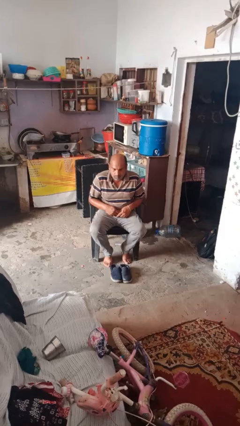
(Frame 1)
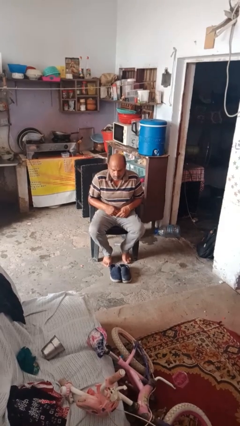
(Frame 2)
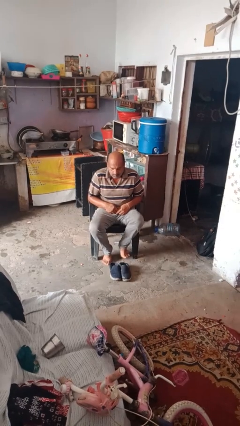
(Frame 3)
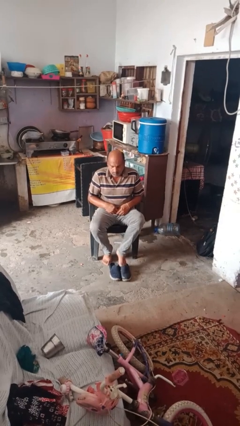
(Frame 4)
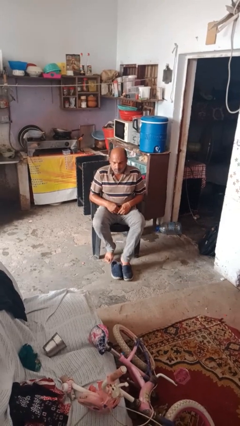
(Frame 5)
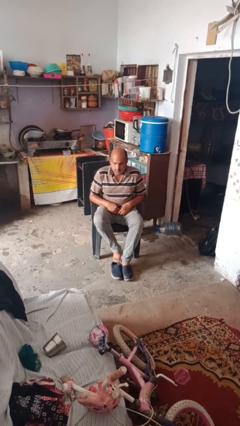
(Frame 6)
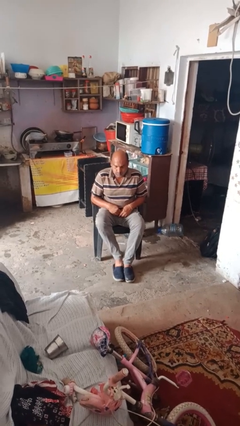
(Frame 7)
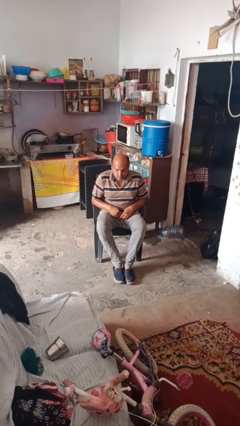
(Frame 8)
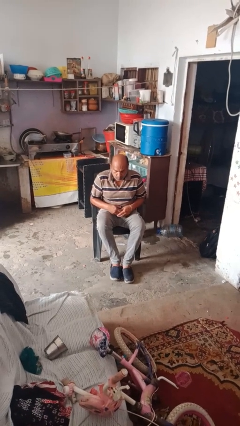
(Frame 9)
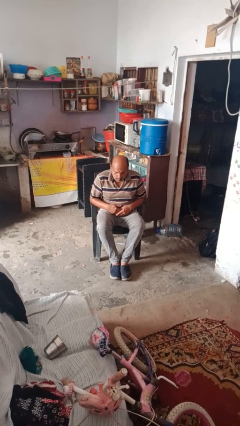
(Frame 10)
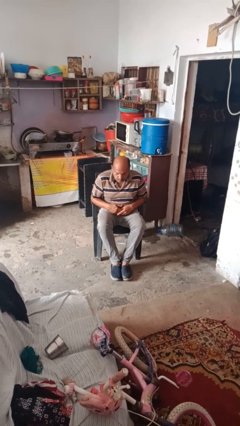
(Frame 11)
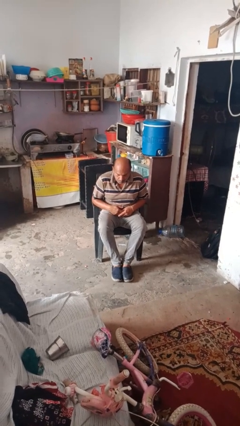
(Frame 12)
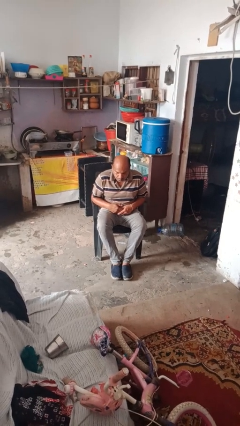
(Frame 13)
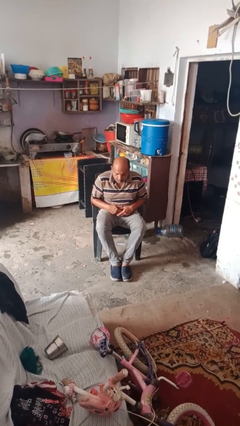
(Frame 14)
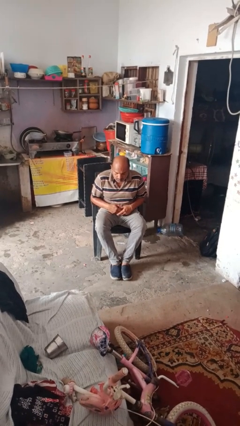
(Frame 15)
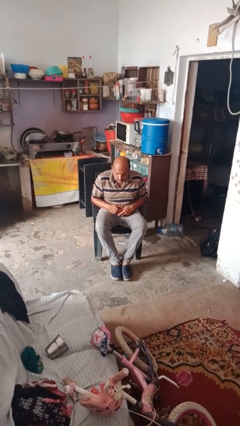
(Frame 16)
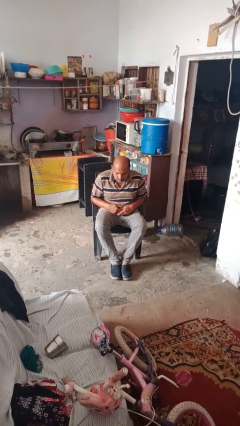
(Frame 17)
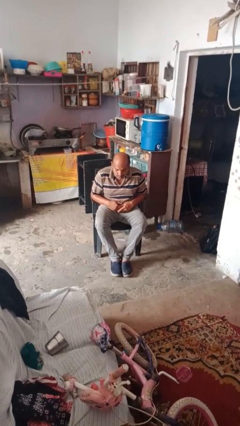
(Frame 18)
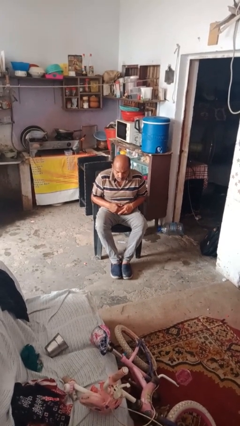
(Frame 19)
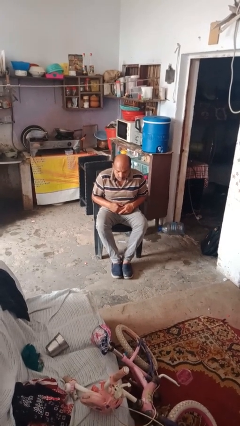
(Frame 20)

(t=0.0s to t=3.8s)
person puts on shoes

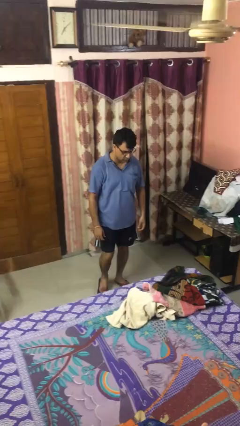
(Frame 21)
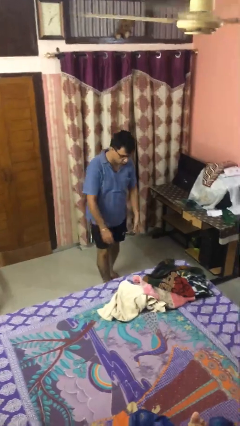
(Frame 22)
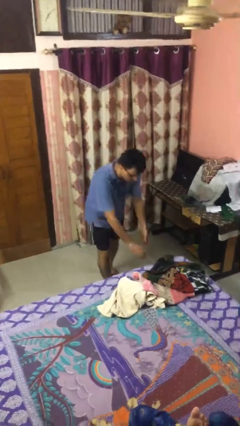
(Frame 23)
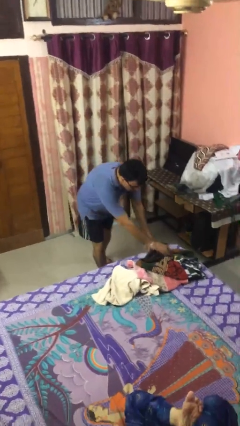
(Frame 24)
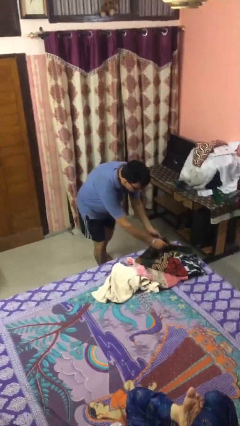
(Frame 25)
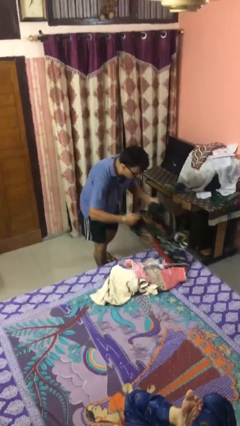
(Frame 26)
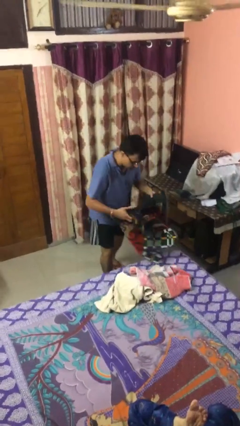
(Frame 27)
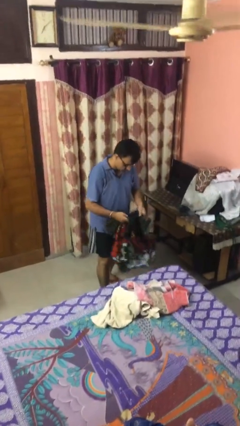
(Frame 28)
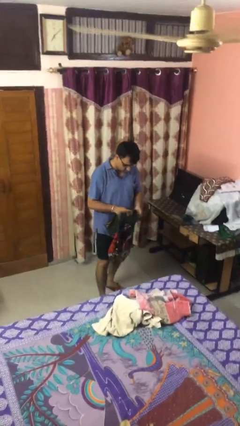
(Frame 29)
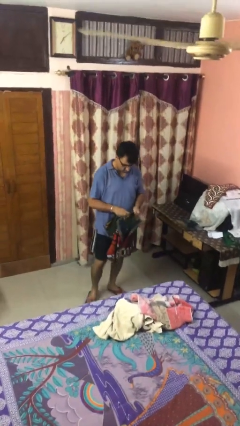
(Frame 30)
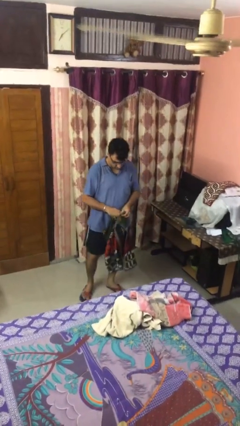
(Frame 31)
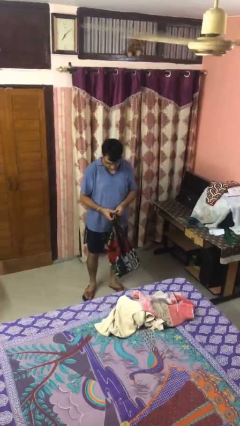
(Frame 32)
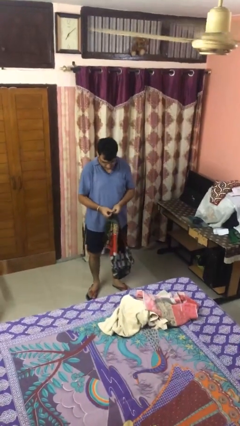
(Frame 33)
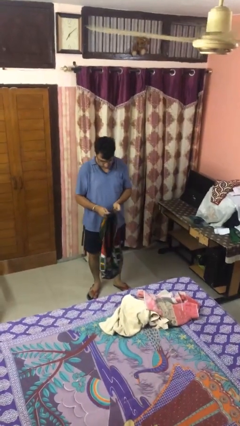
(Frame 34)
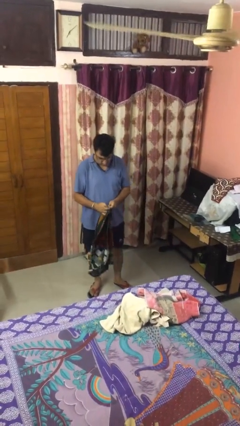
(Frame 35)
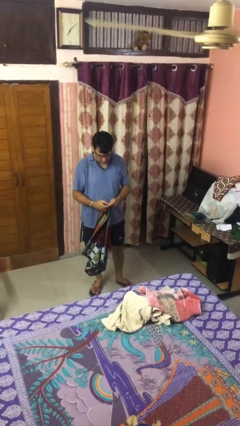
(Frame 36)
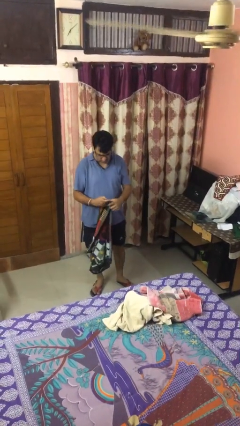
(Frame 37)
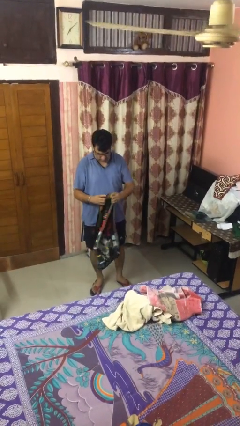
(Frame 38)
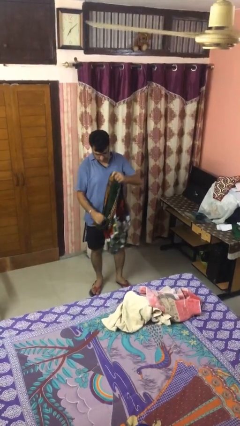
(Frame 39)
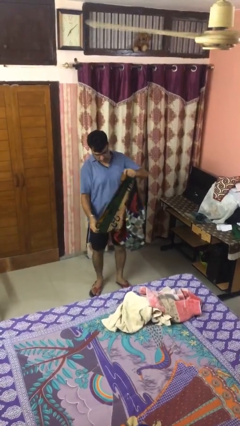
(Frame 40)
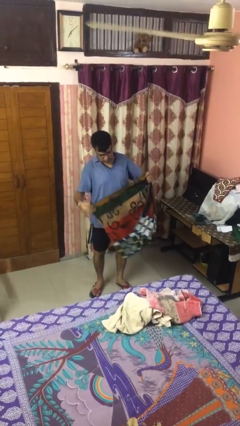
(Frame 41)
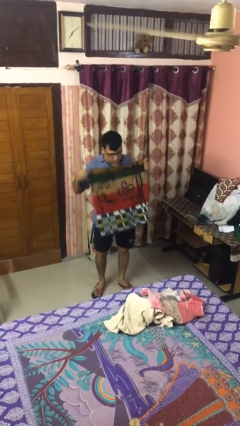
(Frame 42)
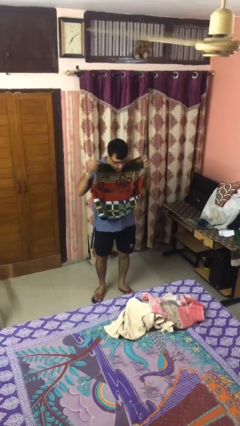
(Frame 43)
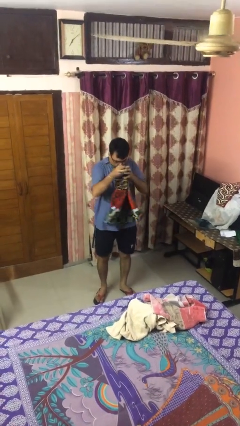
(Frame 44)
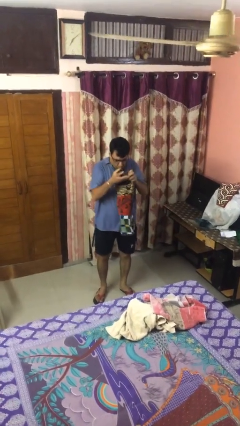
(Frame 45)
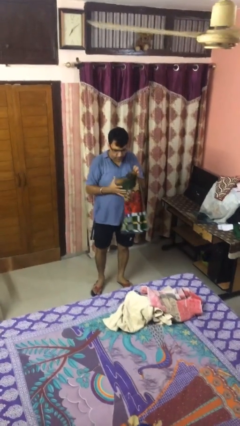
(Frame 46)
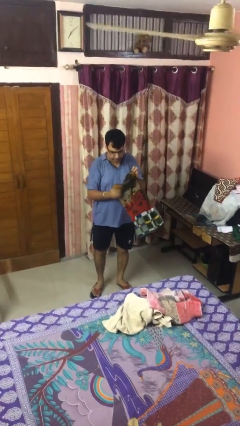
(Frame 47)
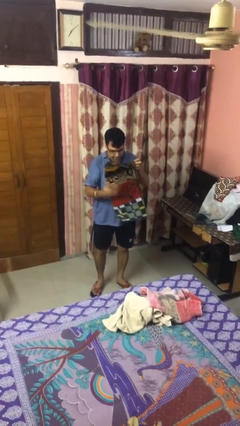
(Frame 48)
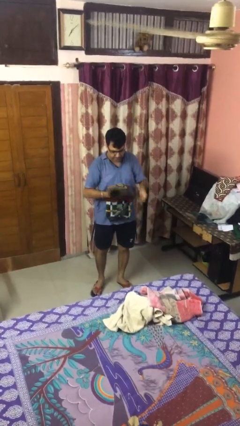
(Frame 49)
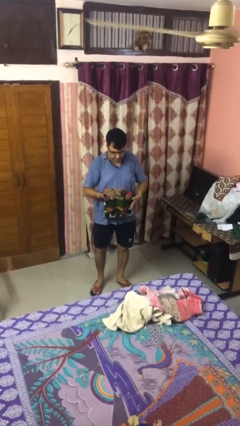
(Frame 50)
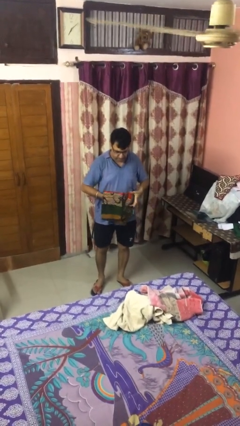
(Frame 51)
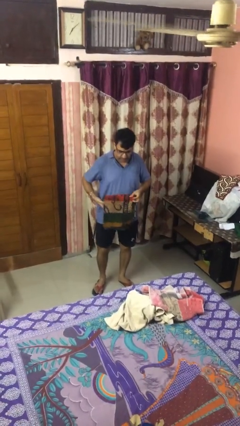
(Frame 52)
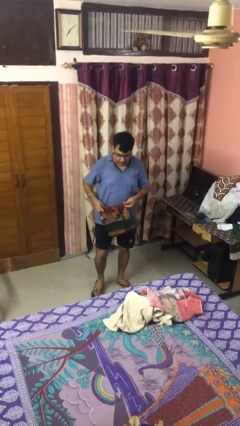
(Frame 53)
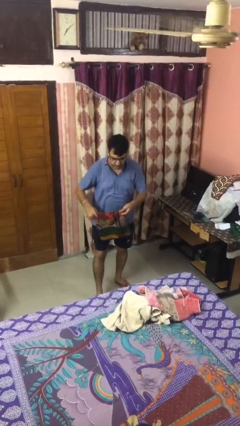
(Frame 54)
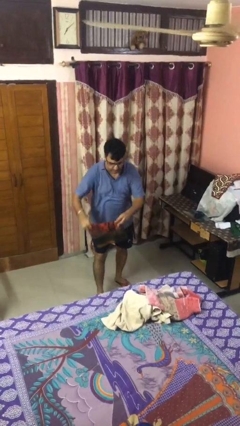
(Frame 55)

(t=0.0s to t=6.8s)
person folds towel

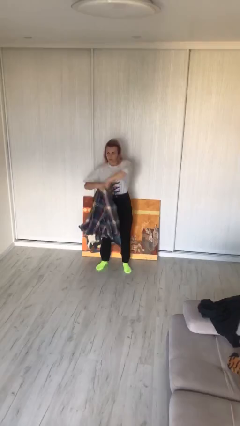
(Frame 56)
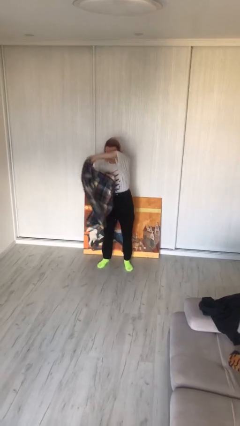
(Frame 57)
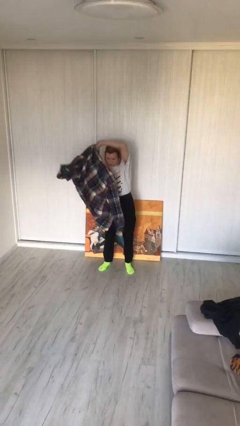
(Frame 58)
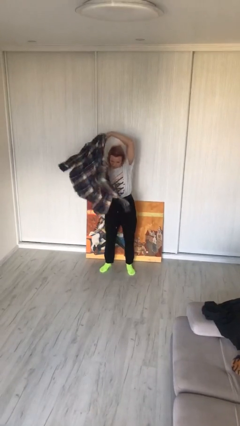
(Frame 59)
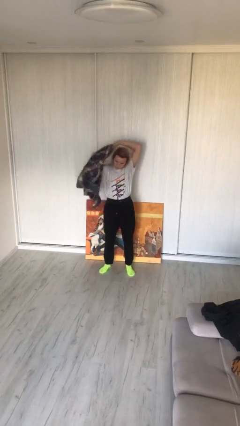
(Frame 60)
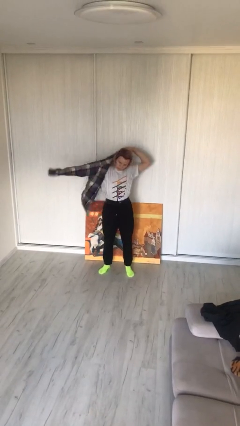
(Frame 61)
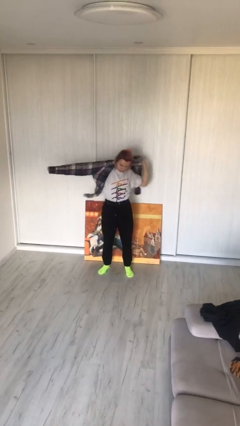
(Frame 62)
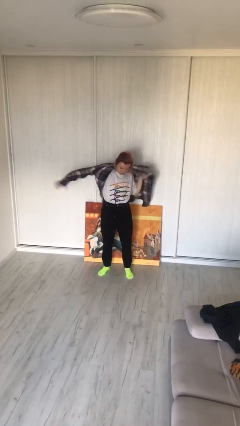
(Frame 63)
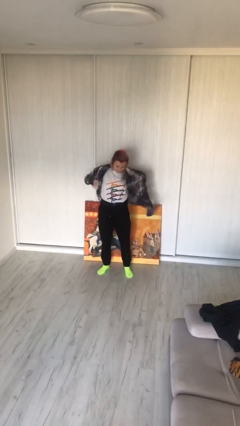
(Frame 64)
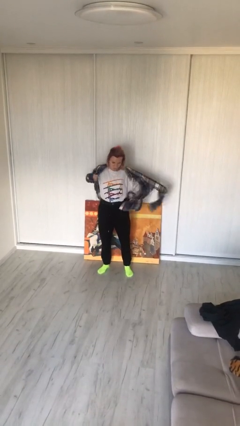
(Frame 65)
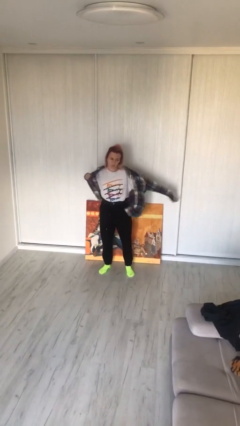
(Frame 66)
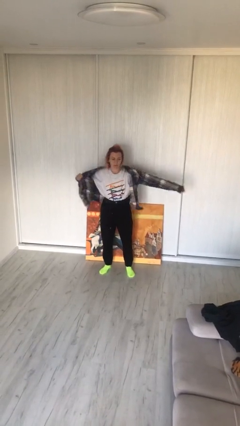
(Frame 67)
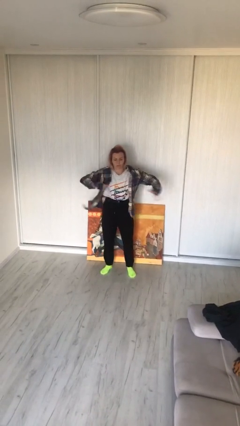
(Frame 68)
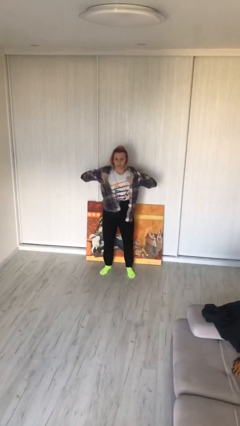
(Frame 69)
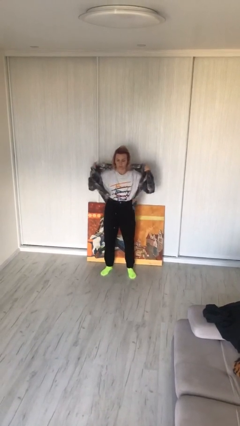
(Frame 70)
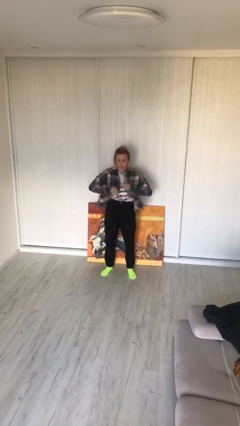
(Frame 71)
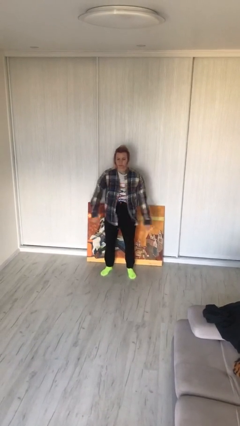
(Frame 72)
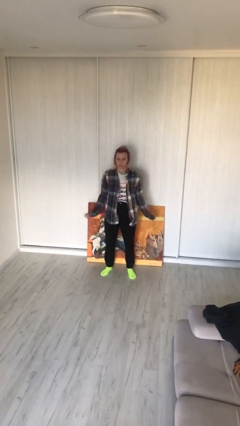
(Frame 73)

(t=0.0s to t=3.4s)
person puts on shirt

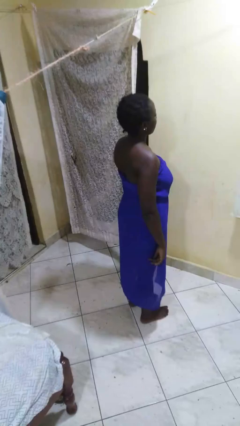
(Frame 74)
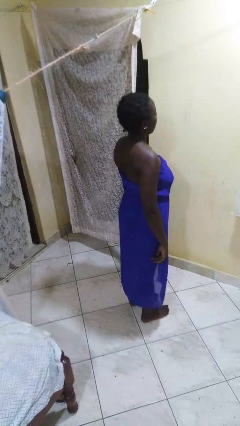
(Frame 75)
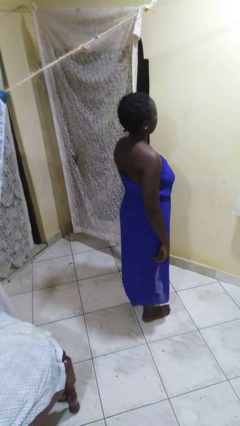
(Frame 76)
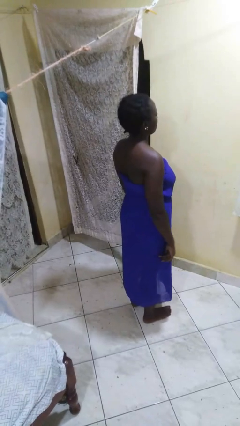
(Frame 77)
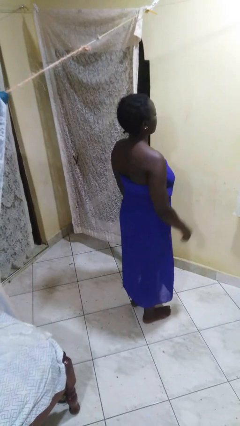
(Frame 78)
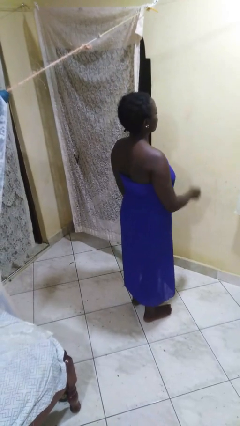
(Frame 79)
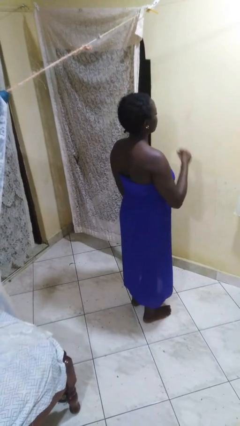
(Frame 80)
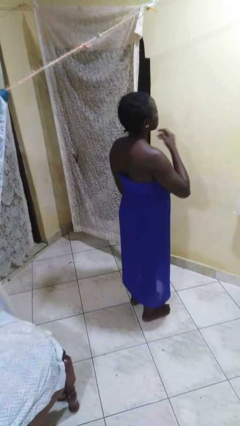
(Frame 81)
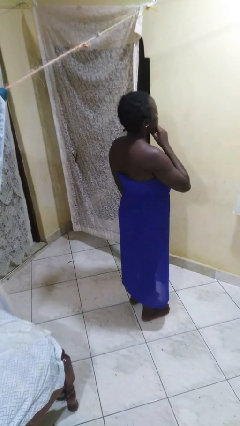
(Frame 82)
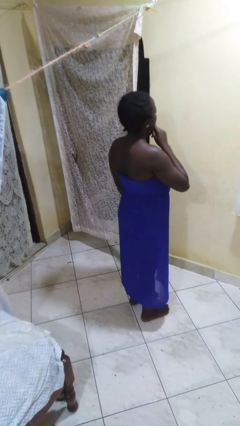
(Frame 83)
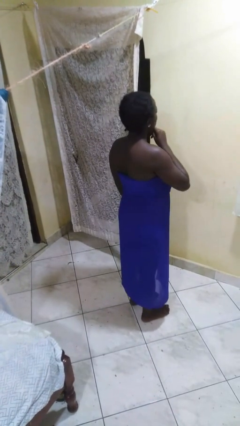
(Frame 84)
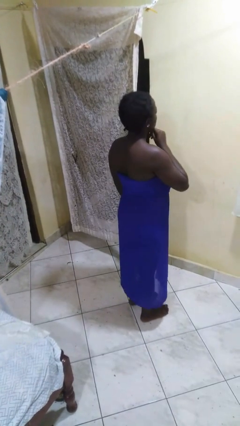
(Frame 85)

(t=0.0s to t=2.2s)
person strokes chin

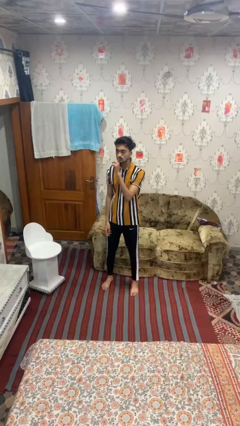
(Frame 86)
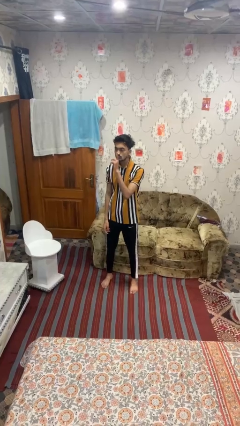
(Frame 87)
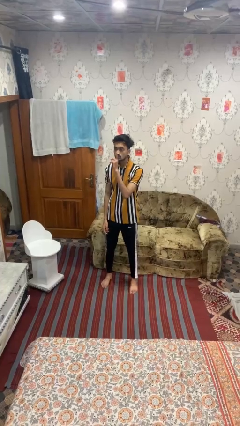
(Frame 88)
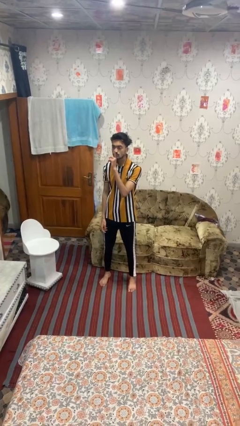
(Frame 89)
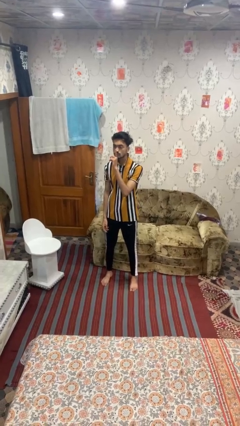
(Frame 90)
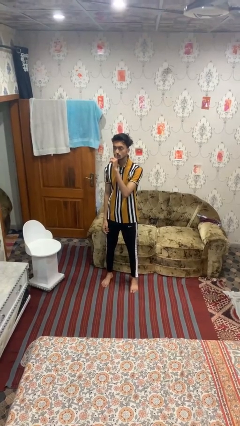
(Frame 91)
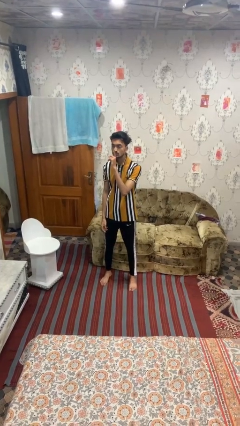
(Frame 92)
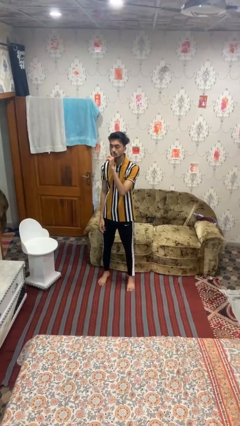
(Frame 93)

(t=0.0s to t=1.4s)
person gestures be quiet
